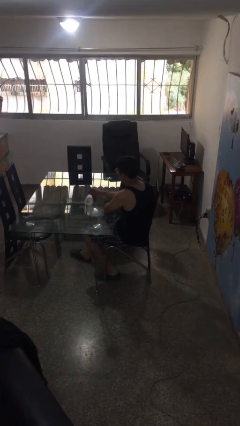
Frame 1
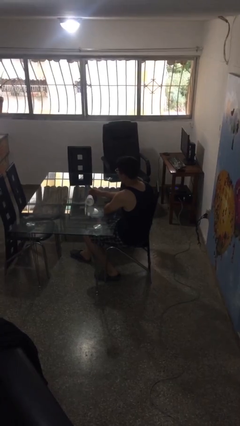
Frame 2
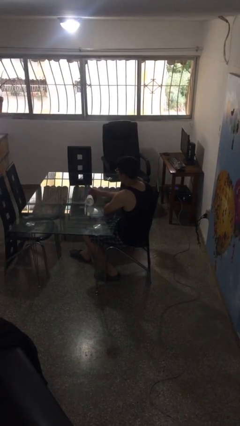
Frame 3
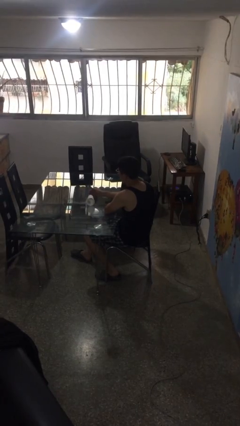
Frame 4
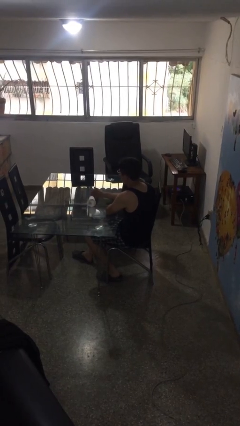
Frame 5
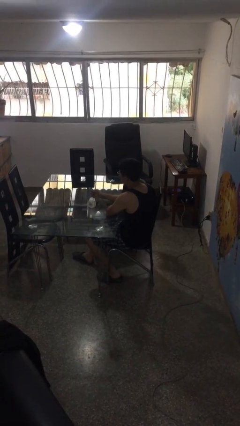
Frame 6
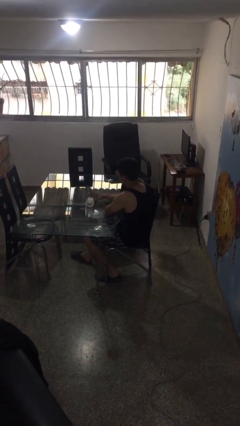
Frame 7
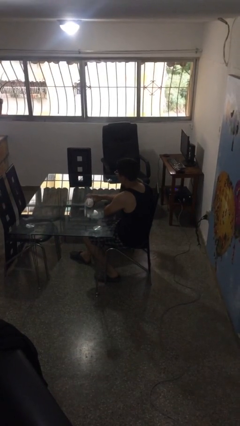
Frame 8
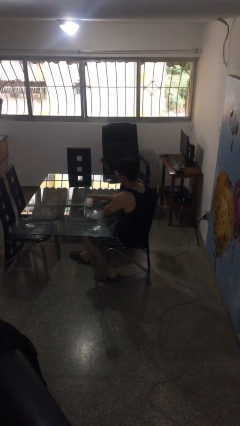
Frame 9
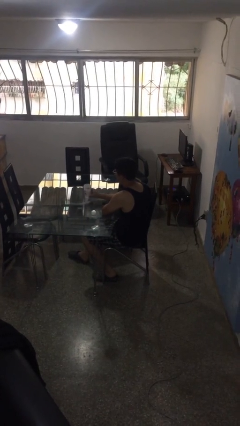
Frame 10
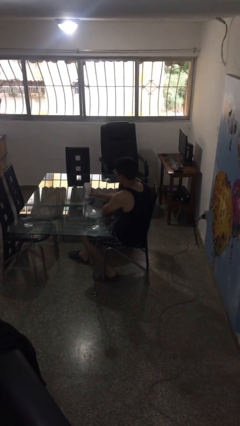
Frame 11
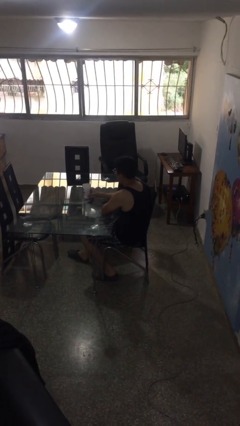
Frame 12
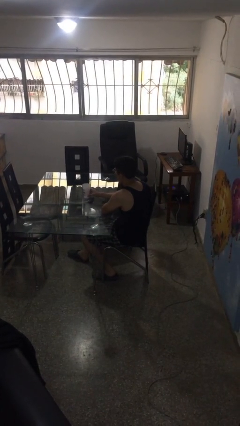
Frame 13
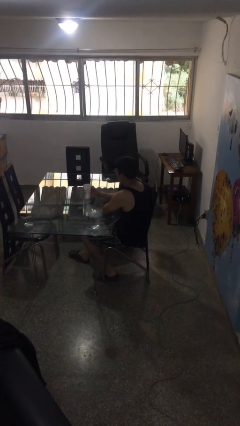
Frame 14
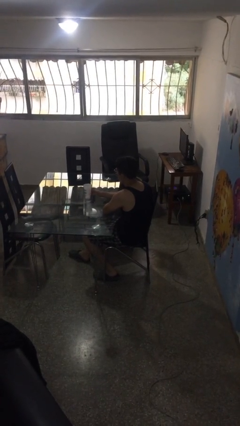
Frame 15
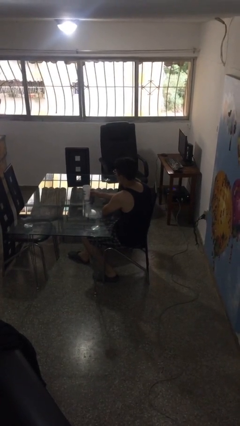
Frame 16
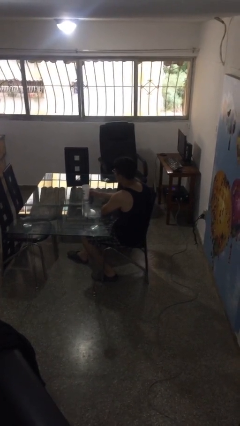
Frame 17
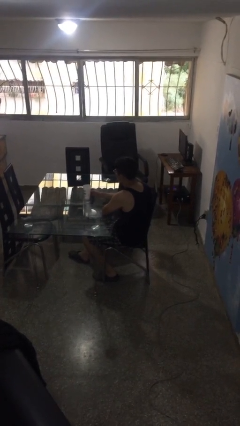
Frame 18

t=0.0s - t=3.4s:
person sets upright glass

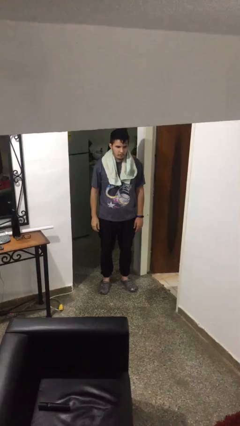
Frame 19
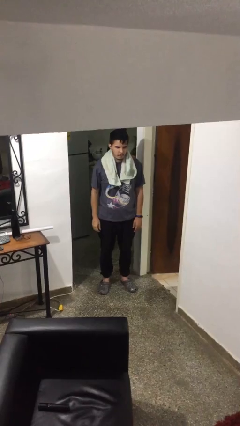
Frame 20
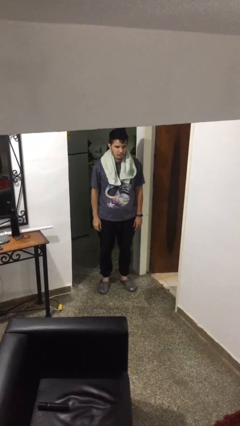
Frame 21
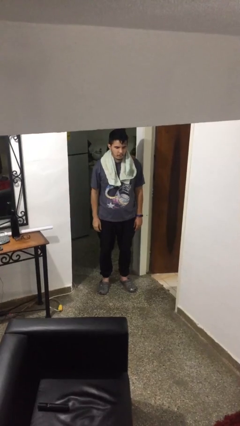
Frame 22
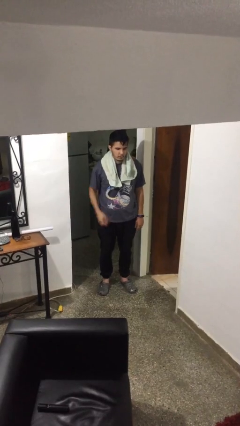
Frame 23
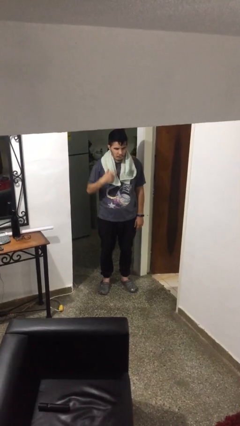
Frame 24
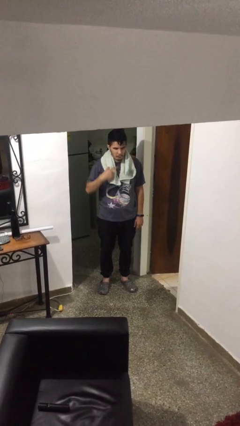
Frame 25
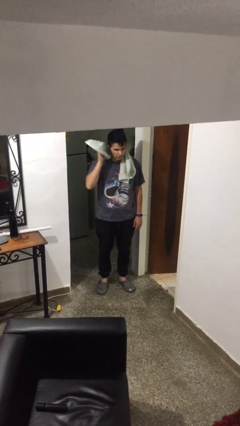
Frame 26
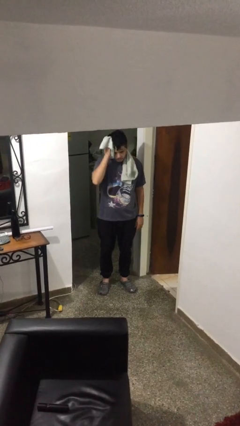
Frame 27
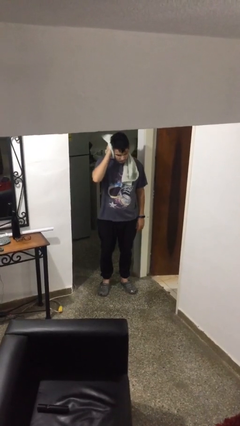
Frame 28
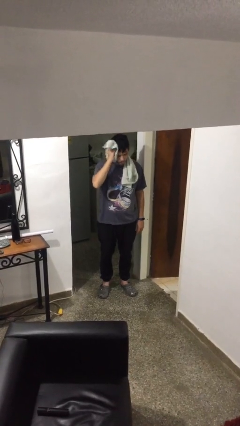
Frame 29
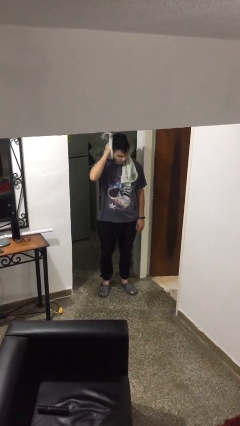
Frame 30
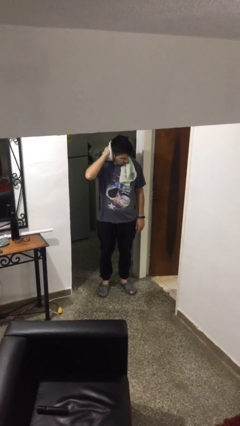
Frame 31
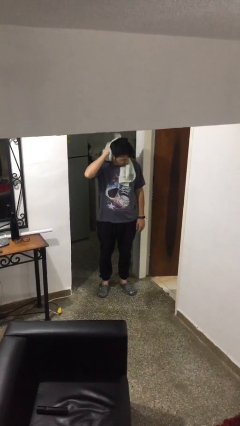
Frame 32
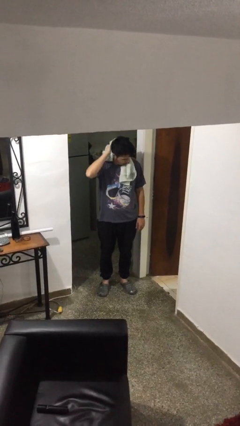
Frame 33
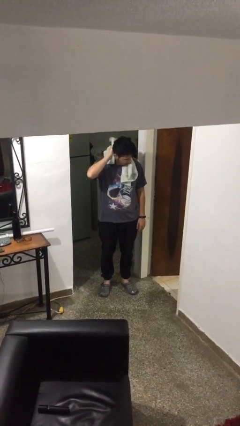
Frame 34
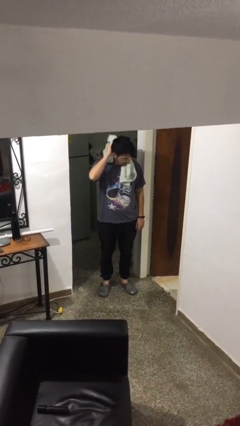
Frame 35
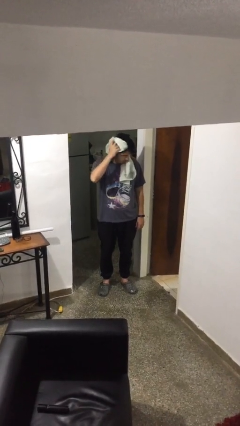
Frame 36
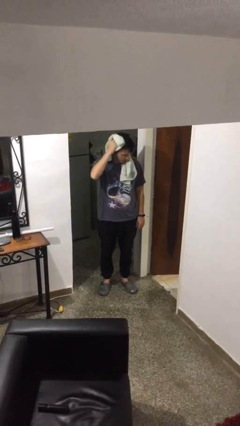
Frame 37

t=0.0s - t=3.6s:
person dries hair with towel

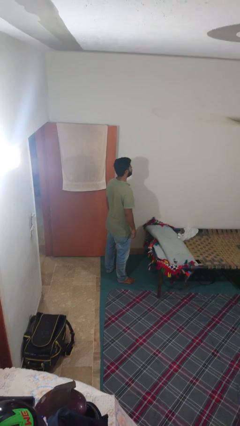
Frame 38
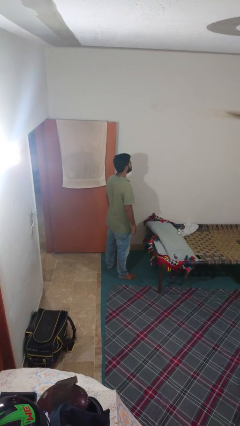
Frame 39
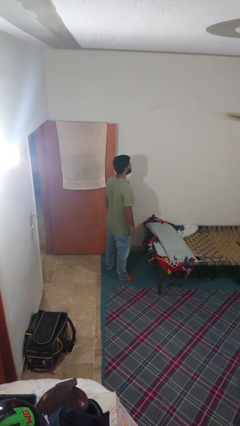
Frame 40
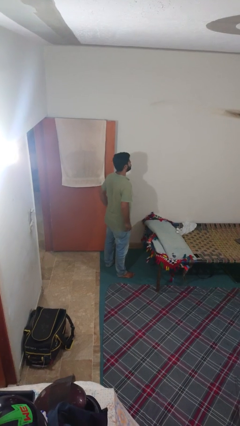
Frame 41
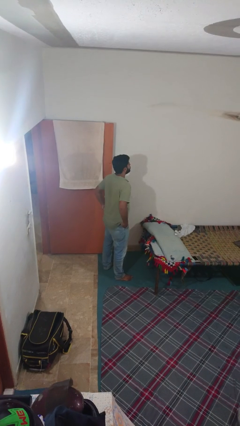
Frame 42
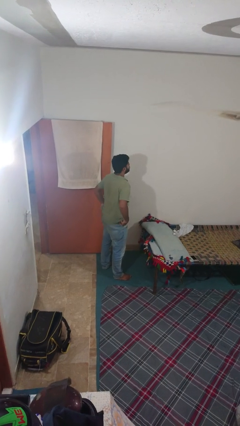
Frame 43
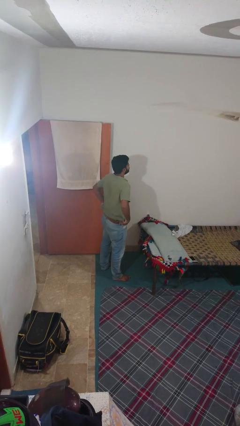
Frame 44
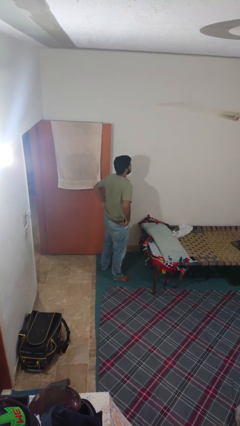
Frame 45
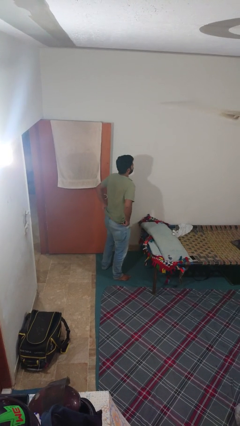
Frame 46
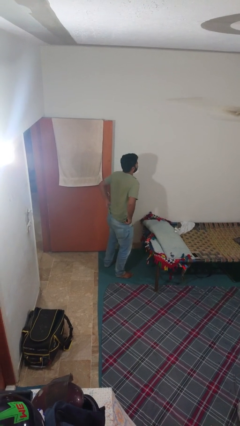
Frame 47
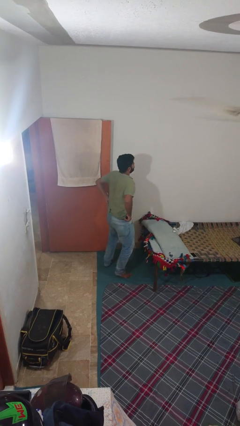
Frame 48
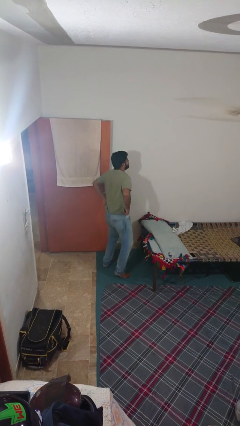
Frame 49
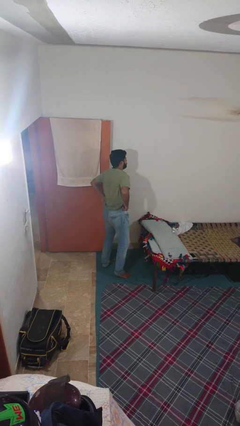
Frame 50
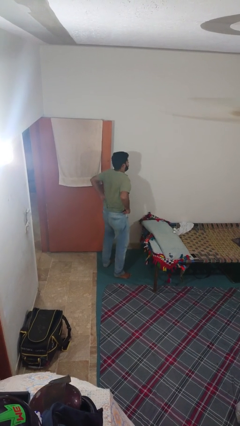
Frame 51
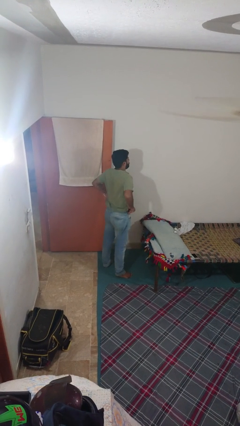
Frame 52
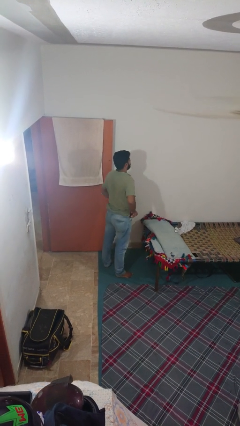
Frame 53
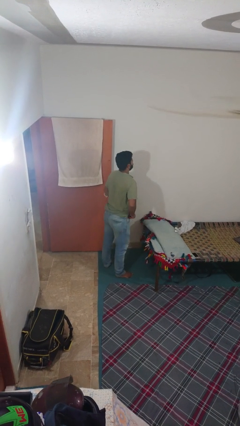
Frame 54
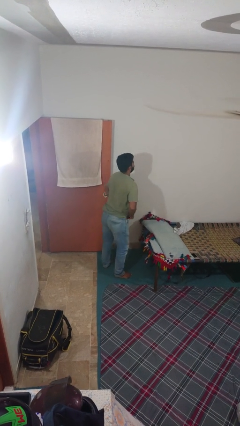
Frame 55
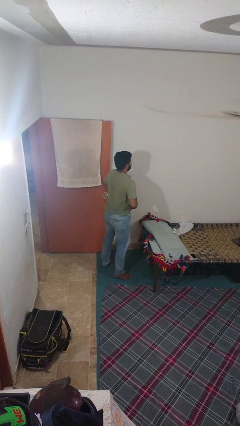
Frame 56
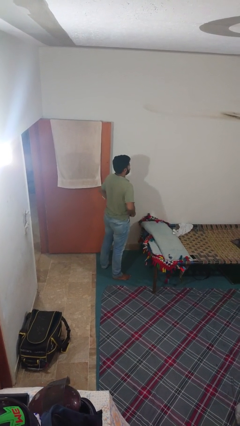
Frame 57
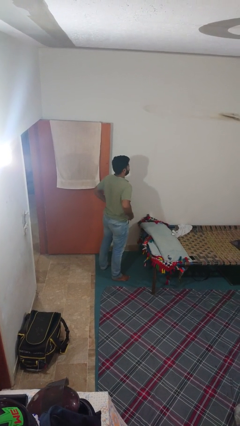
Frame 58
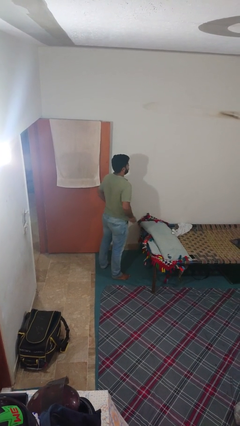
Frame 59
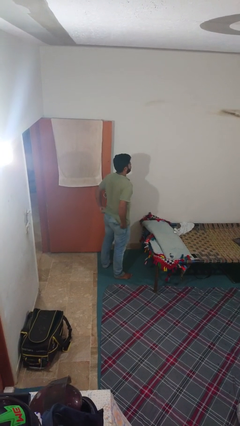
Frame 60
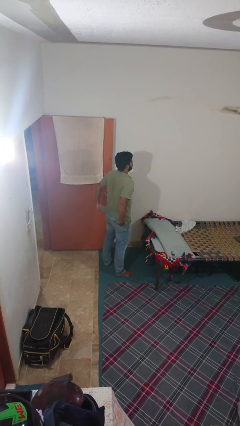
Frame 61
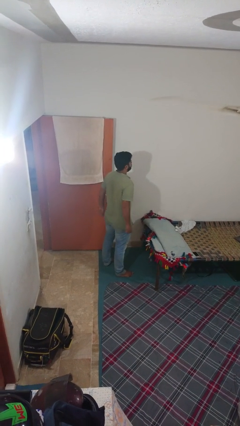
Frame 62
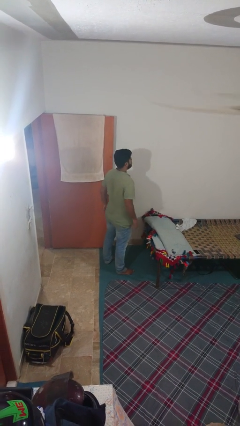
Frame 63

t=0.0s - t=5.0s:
person hikes up pants

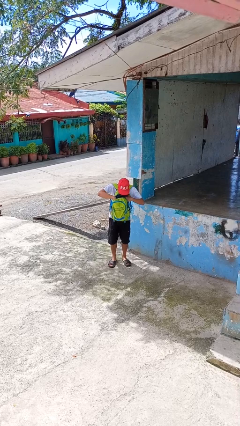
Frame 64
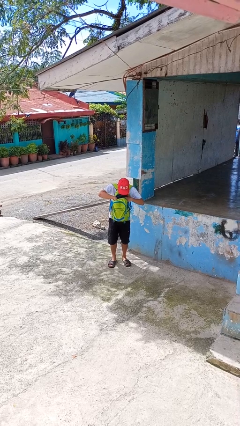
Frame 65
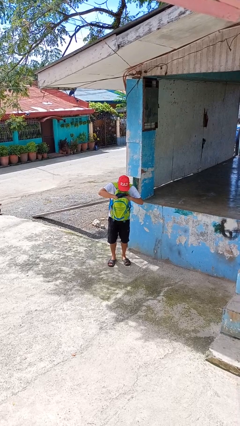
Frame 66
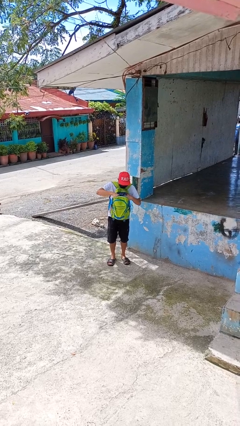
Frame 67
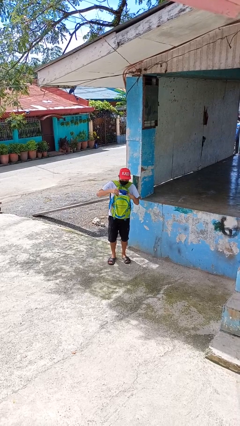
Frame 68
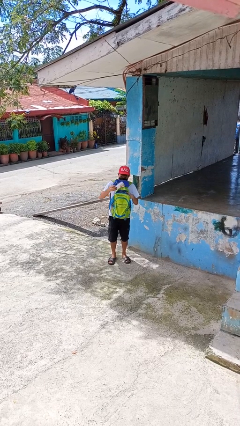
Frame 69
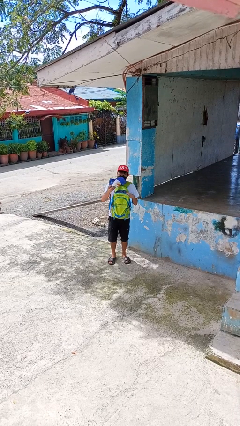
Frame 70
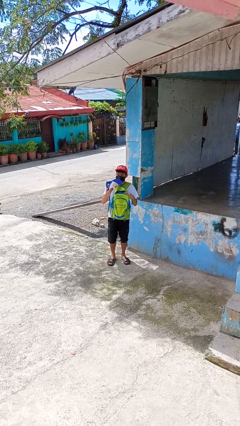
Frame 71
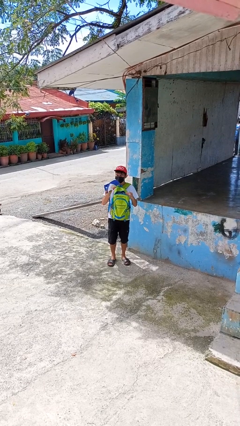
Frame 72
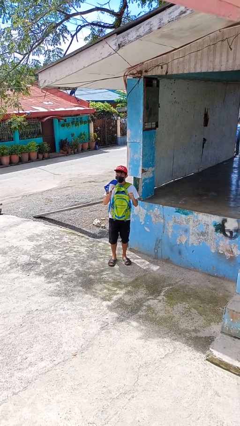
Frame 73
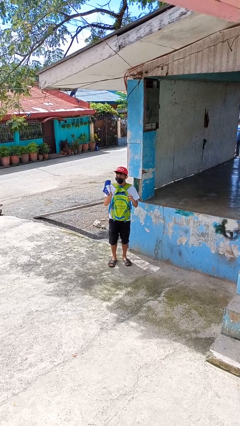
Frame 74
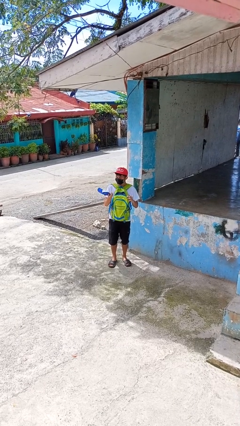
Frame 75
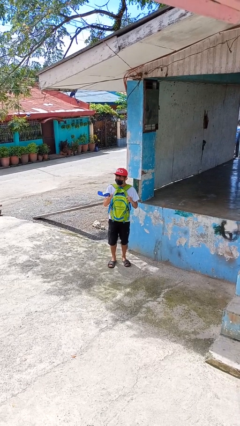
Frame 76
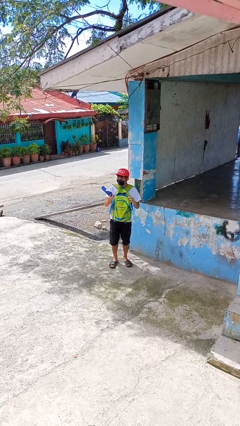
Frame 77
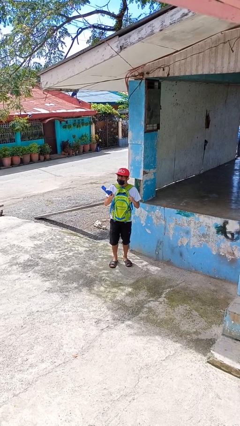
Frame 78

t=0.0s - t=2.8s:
person takes object from backpack

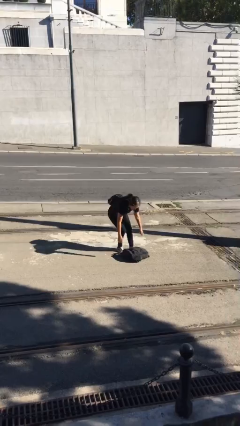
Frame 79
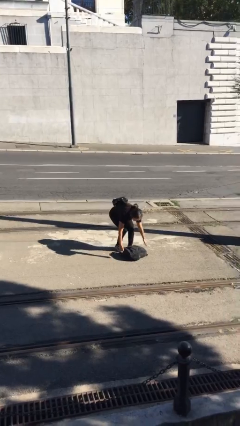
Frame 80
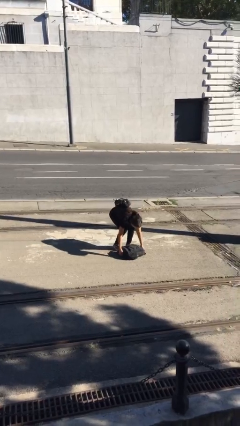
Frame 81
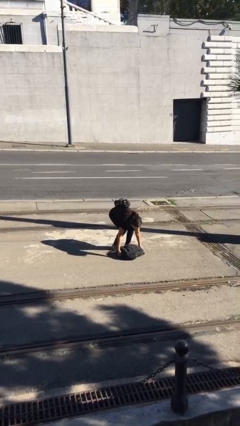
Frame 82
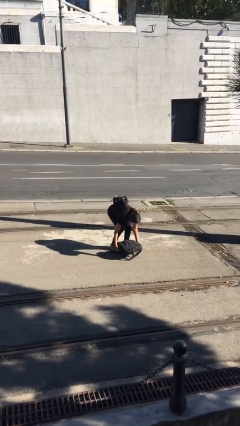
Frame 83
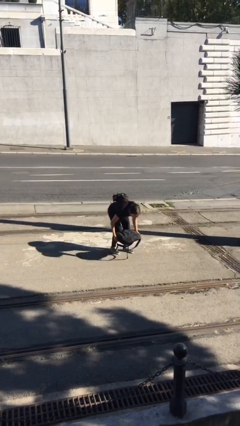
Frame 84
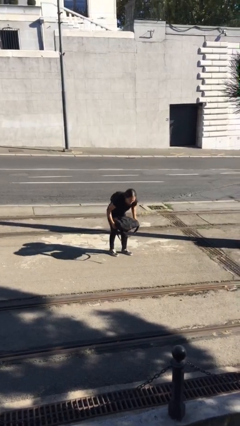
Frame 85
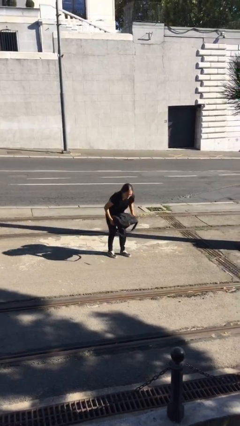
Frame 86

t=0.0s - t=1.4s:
person picks up object from floor

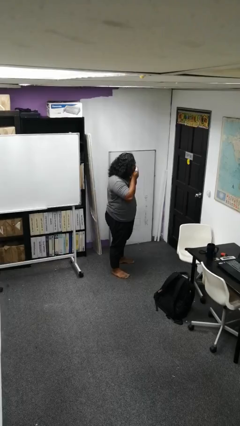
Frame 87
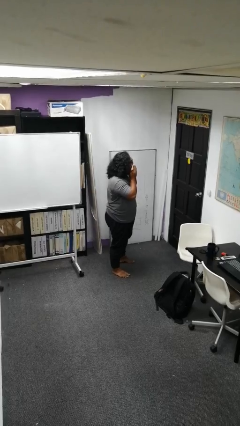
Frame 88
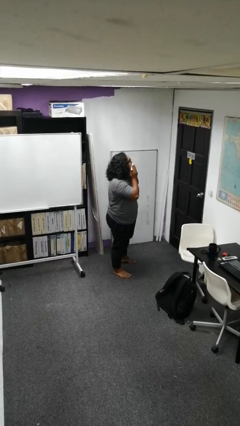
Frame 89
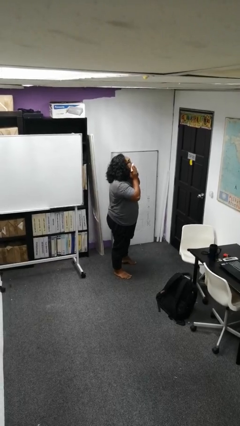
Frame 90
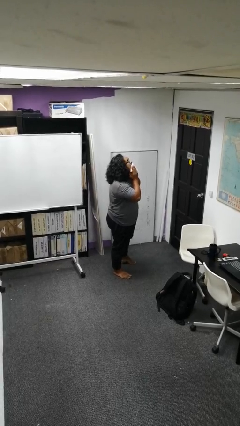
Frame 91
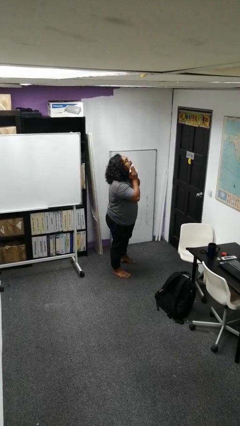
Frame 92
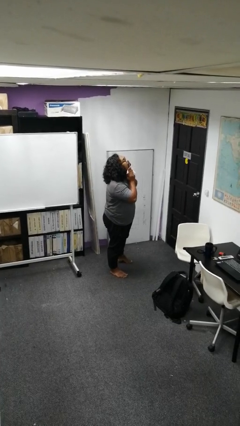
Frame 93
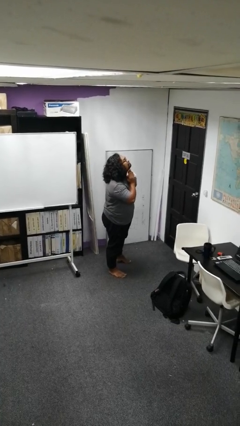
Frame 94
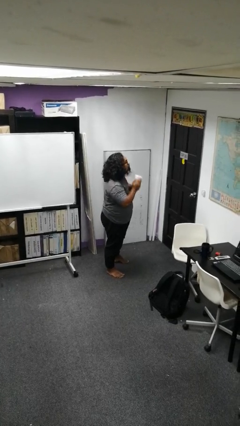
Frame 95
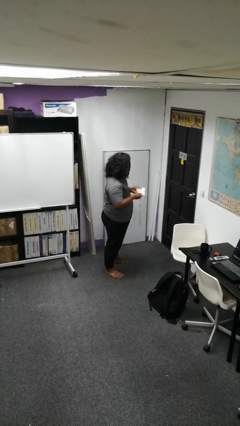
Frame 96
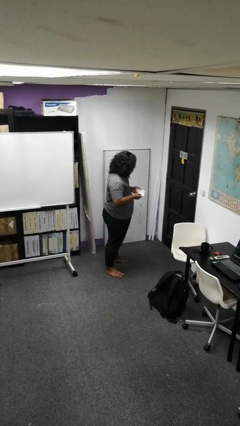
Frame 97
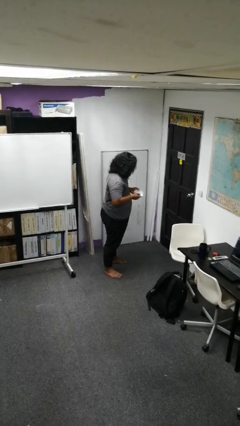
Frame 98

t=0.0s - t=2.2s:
person wipes mouth with napkin
